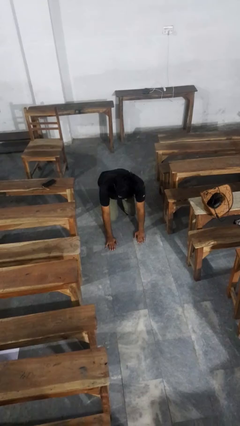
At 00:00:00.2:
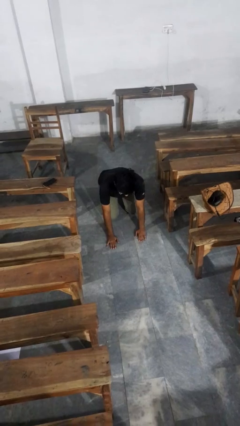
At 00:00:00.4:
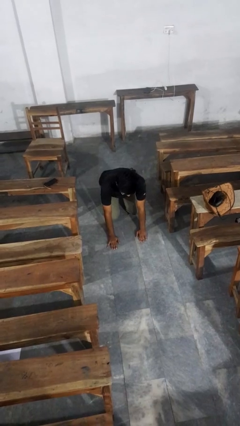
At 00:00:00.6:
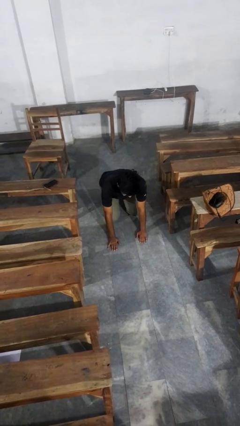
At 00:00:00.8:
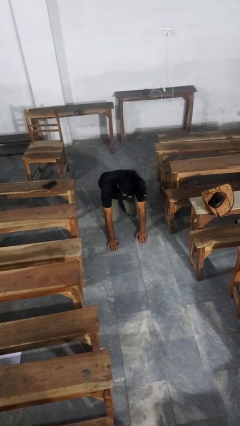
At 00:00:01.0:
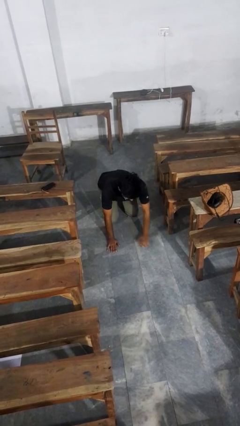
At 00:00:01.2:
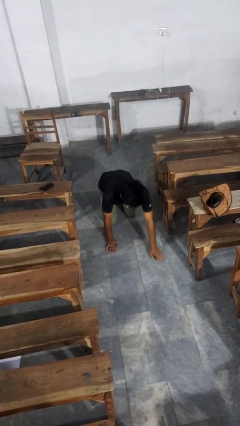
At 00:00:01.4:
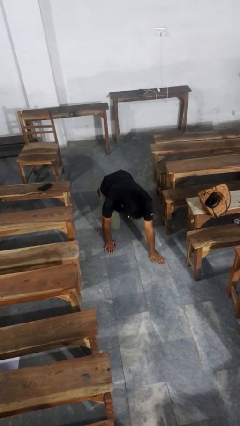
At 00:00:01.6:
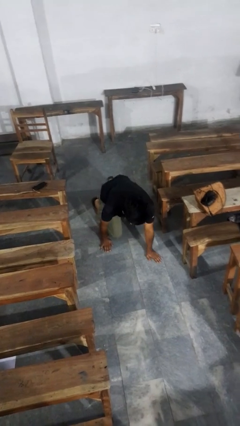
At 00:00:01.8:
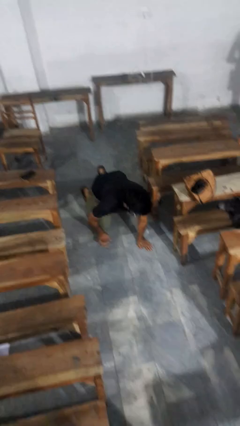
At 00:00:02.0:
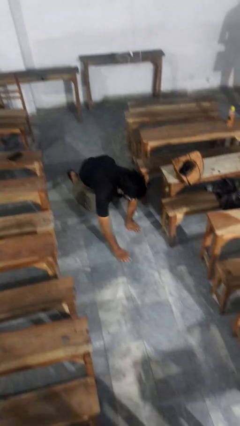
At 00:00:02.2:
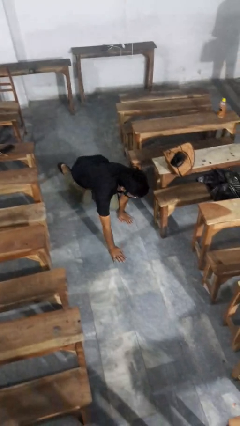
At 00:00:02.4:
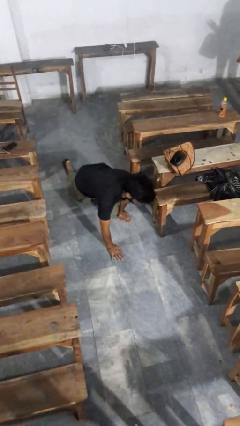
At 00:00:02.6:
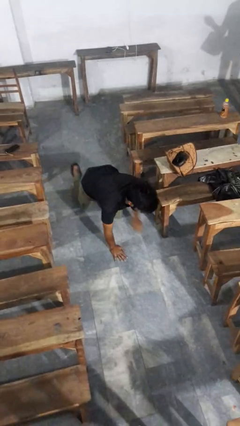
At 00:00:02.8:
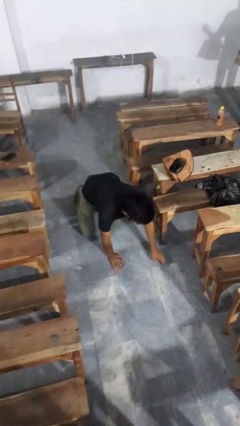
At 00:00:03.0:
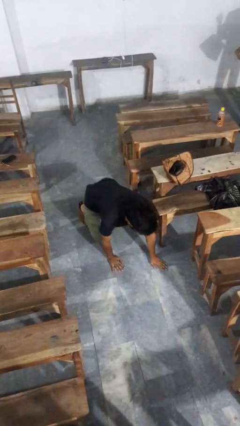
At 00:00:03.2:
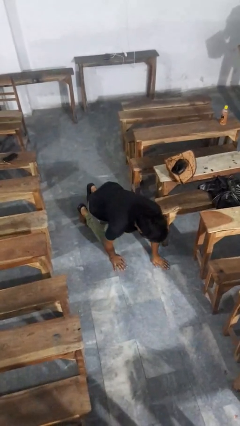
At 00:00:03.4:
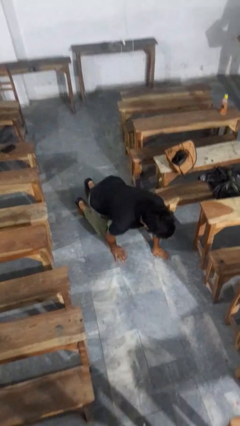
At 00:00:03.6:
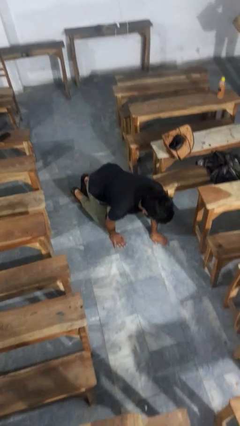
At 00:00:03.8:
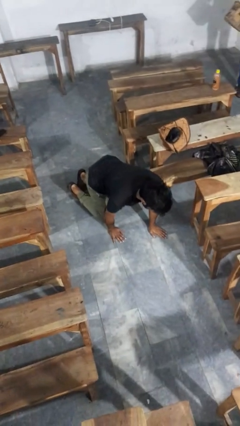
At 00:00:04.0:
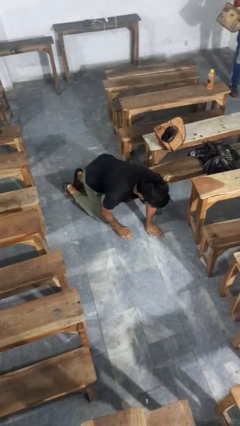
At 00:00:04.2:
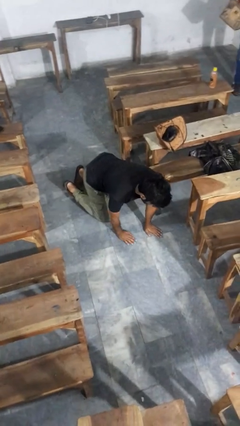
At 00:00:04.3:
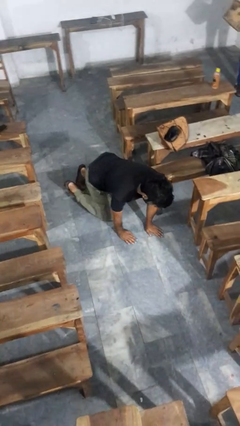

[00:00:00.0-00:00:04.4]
person crawls

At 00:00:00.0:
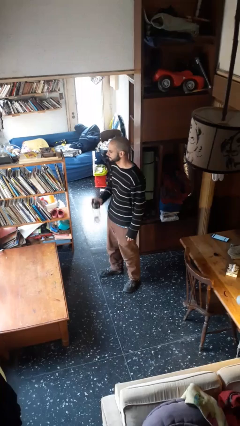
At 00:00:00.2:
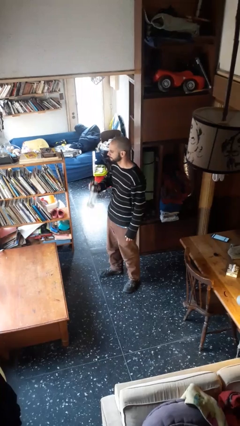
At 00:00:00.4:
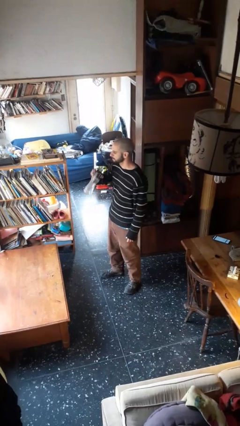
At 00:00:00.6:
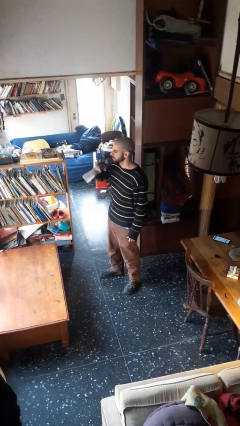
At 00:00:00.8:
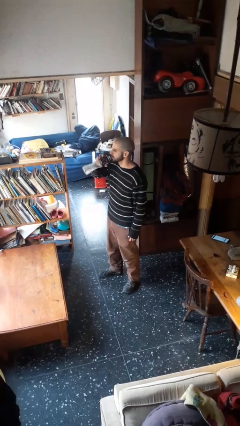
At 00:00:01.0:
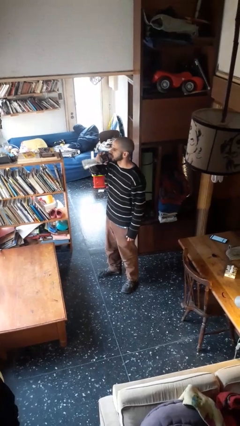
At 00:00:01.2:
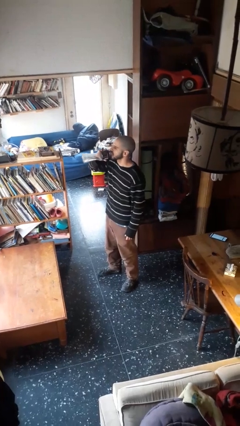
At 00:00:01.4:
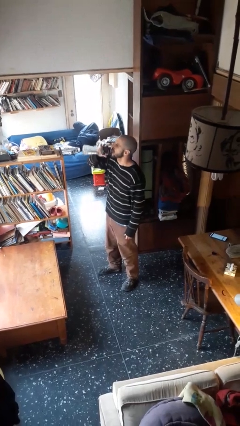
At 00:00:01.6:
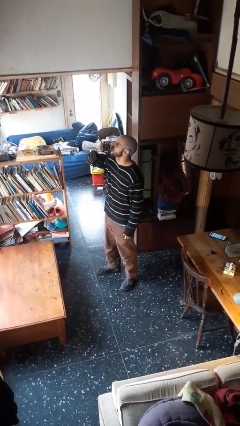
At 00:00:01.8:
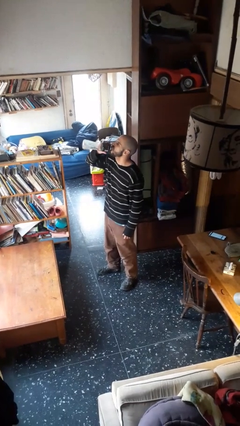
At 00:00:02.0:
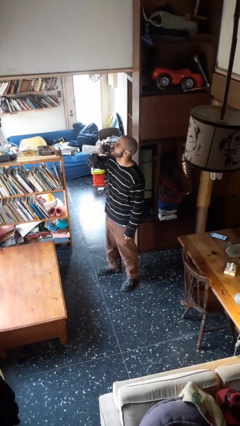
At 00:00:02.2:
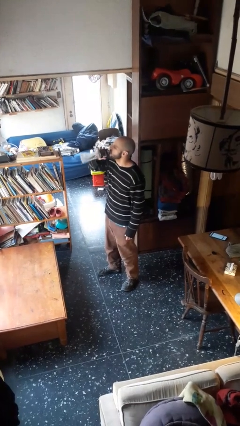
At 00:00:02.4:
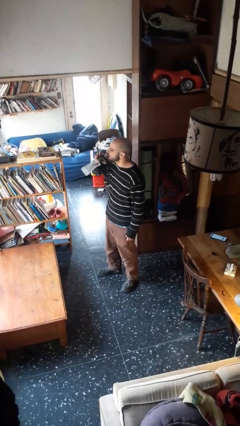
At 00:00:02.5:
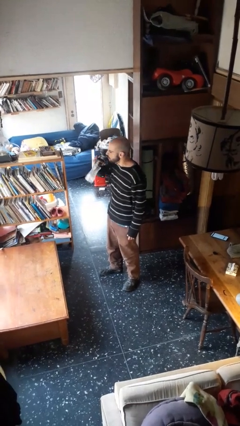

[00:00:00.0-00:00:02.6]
person drinks from bottle

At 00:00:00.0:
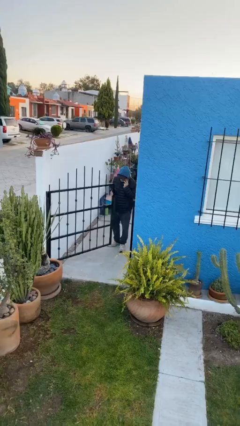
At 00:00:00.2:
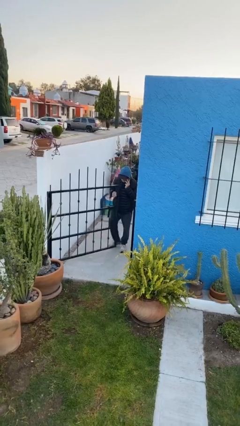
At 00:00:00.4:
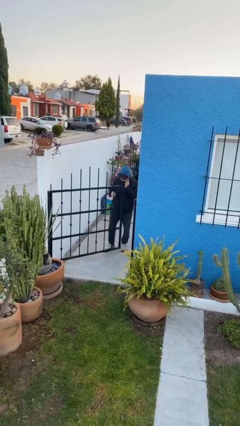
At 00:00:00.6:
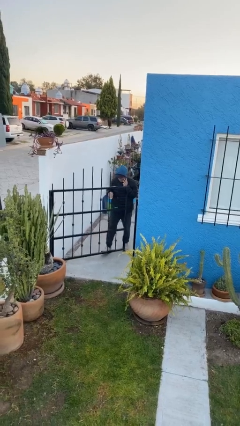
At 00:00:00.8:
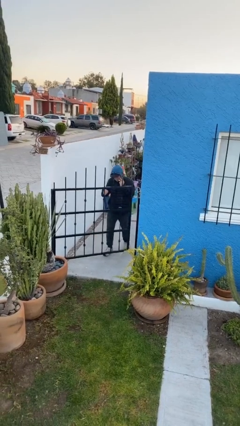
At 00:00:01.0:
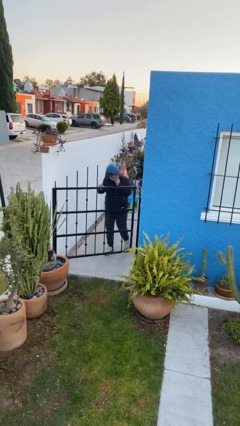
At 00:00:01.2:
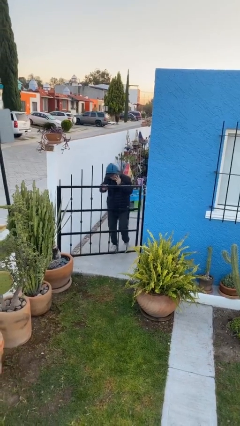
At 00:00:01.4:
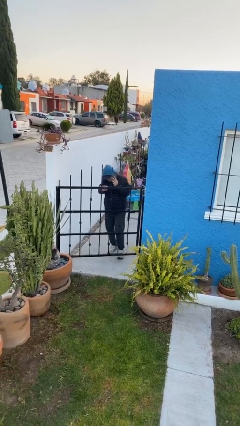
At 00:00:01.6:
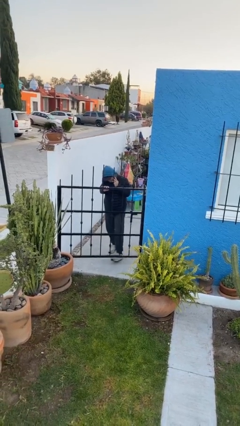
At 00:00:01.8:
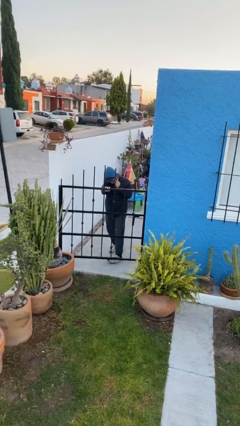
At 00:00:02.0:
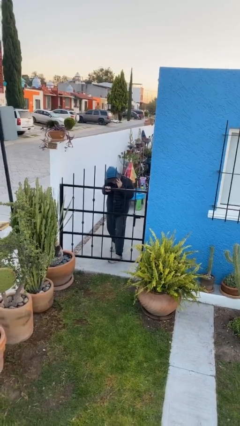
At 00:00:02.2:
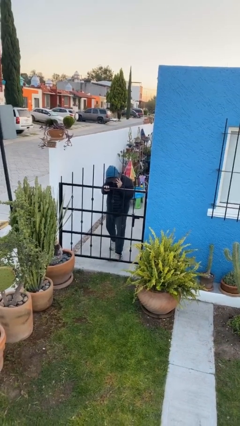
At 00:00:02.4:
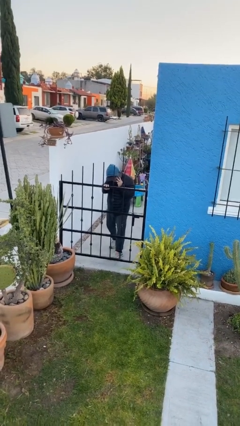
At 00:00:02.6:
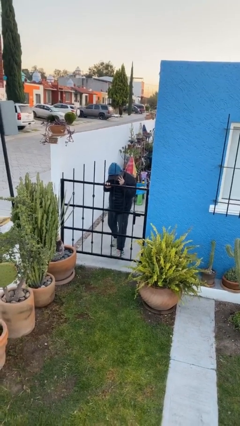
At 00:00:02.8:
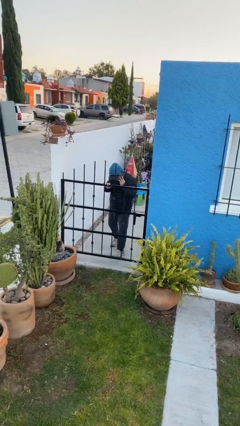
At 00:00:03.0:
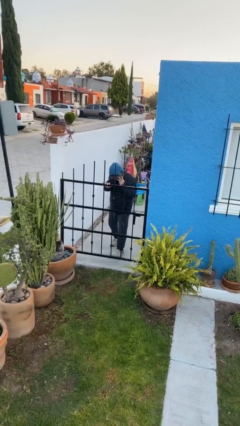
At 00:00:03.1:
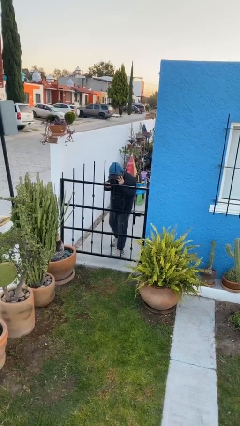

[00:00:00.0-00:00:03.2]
person closes facility door

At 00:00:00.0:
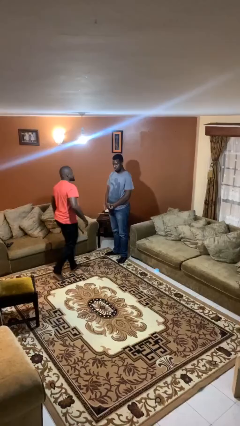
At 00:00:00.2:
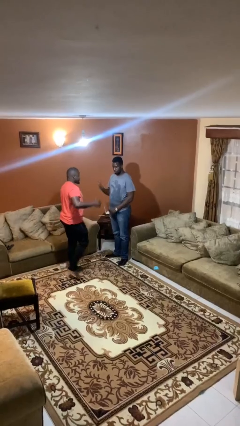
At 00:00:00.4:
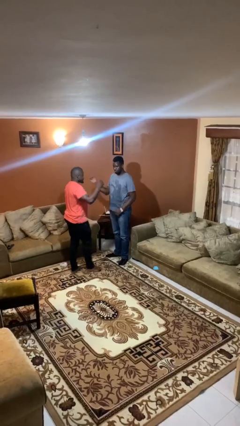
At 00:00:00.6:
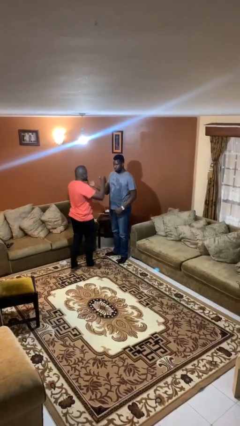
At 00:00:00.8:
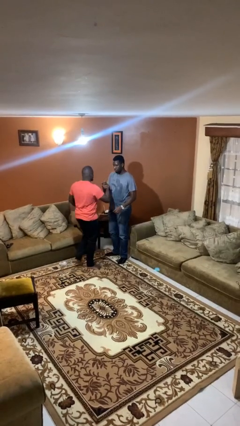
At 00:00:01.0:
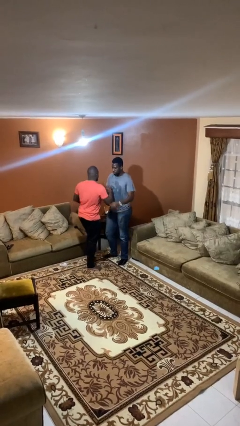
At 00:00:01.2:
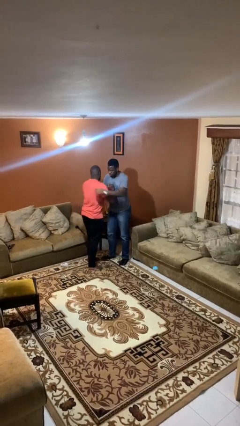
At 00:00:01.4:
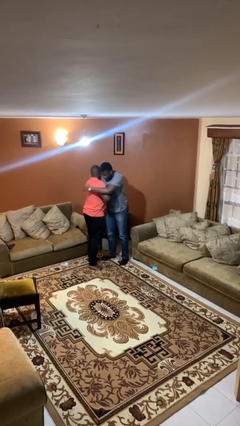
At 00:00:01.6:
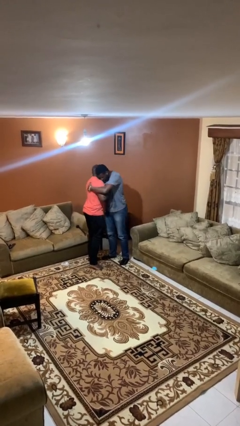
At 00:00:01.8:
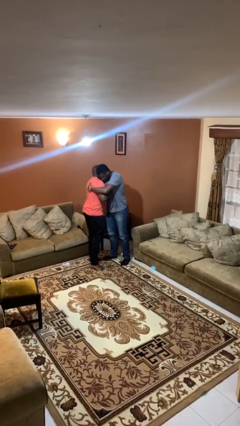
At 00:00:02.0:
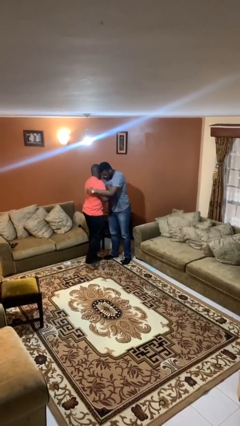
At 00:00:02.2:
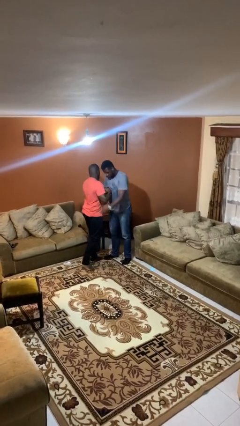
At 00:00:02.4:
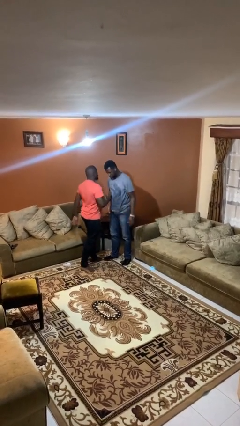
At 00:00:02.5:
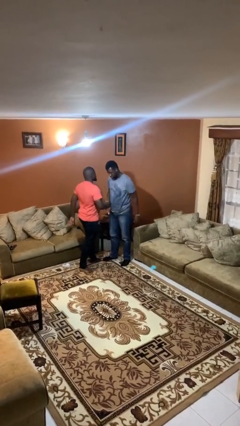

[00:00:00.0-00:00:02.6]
person embraces person

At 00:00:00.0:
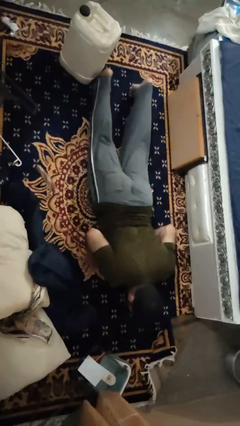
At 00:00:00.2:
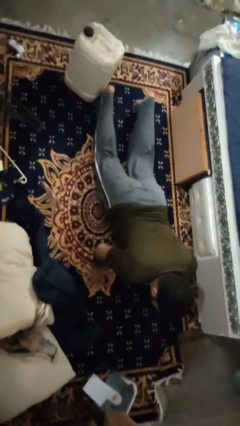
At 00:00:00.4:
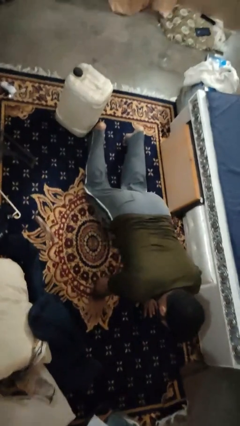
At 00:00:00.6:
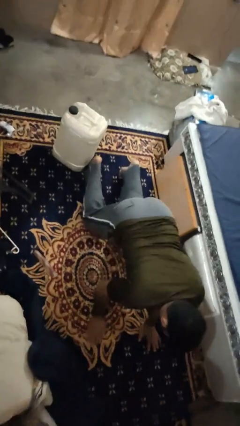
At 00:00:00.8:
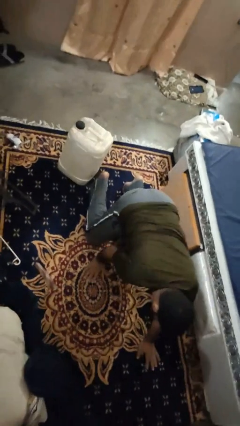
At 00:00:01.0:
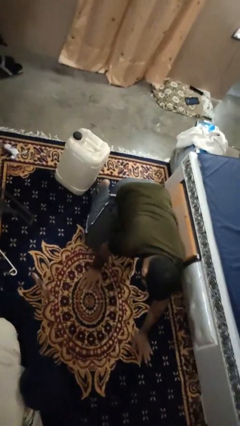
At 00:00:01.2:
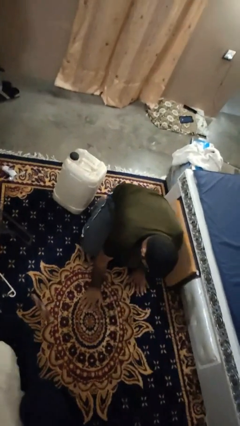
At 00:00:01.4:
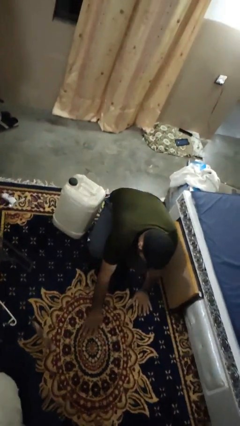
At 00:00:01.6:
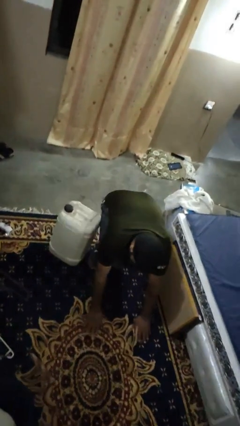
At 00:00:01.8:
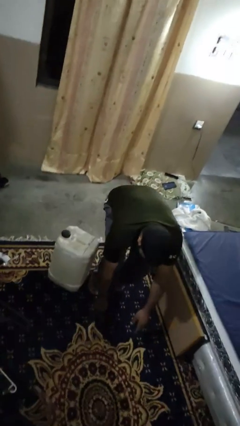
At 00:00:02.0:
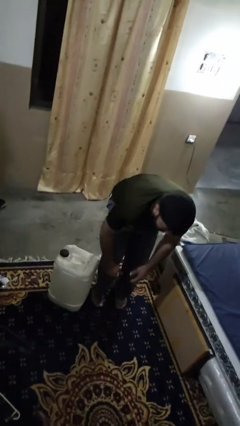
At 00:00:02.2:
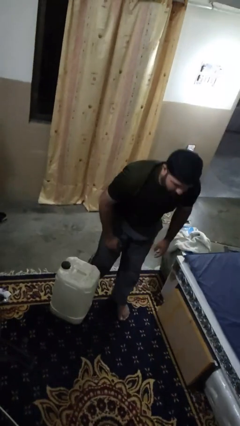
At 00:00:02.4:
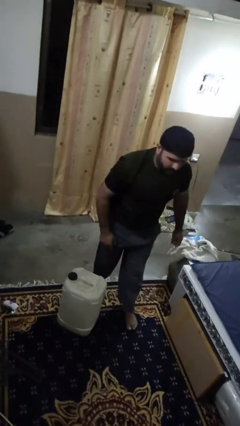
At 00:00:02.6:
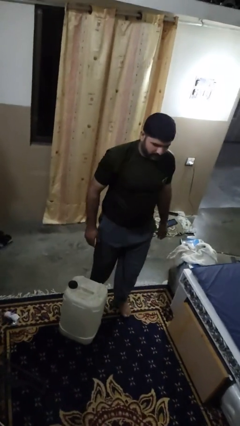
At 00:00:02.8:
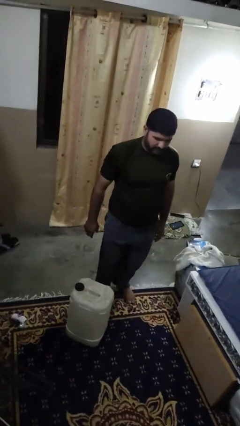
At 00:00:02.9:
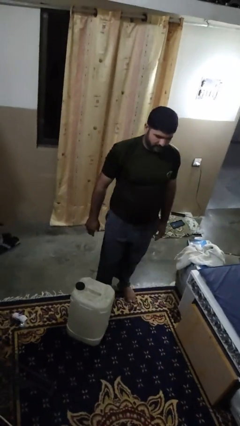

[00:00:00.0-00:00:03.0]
person stands up from floor

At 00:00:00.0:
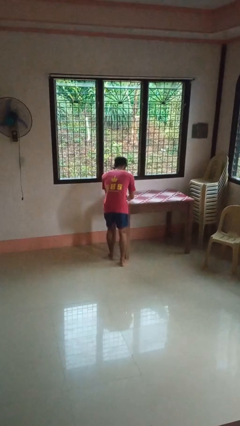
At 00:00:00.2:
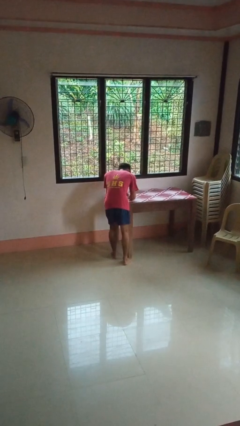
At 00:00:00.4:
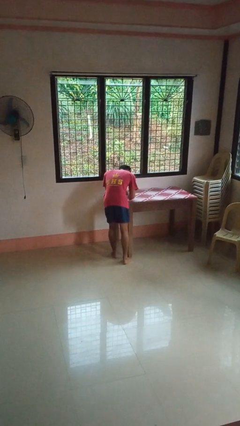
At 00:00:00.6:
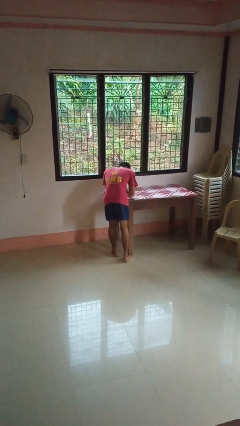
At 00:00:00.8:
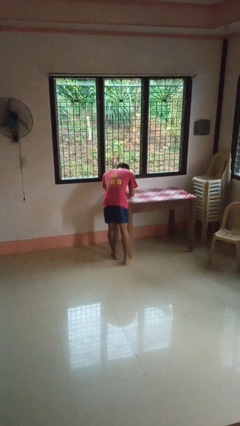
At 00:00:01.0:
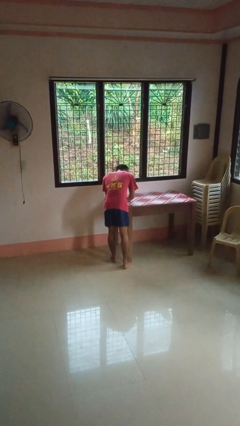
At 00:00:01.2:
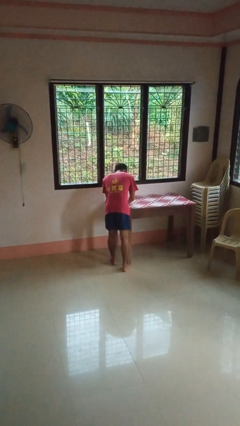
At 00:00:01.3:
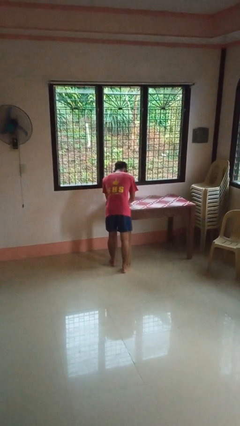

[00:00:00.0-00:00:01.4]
person bumps into table
